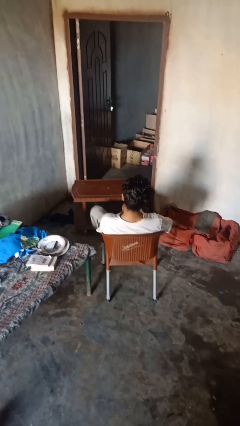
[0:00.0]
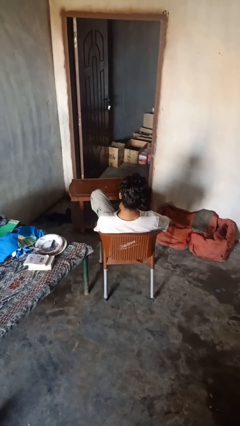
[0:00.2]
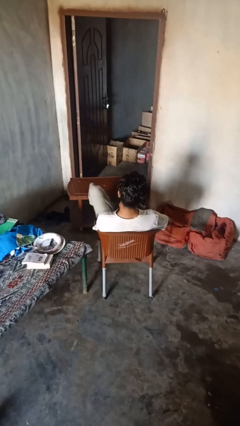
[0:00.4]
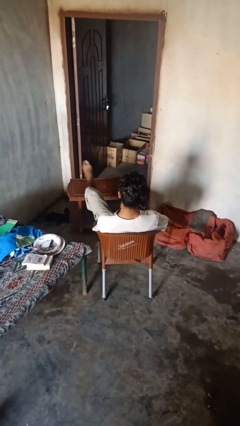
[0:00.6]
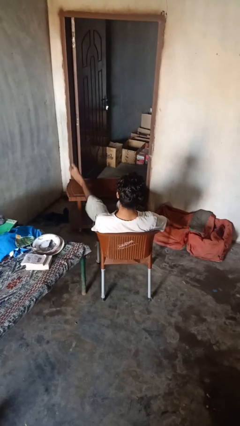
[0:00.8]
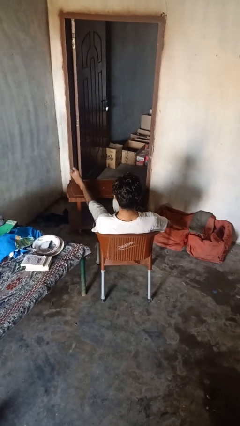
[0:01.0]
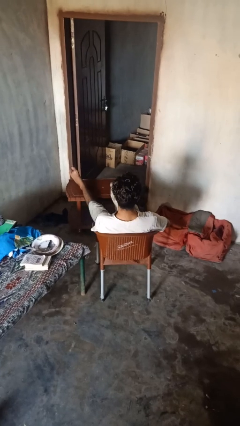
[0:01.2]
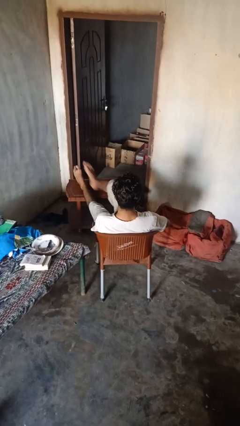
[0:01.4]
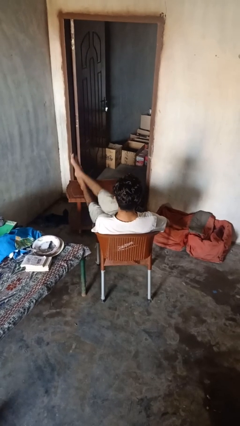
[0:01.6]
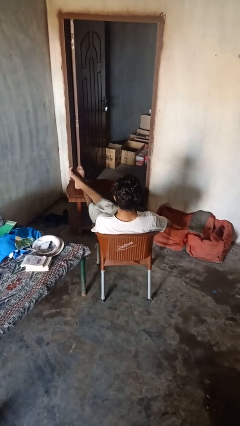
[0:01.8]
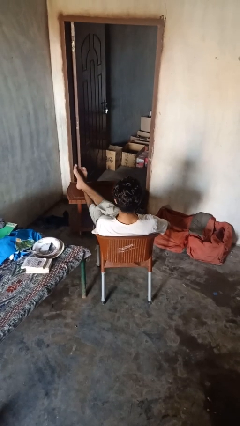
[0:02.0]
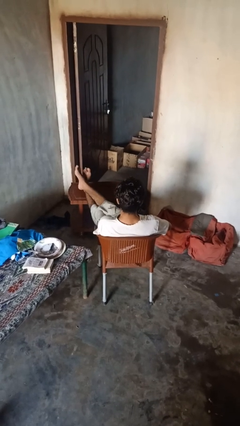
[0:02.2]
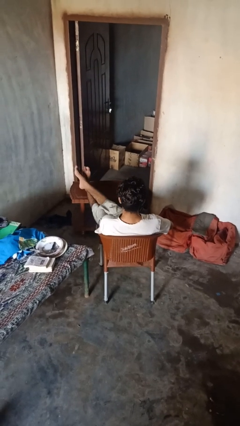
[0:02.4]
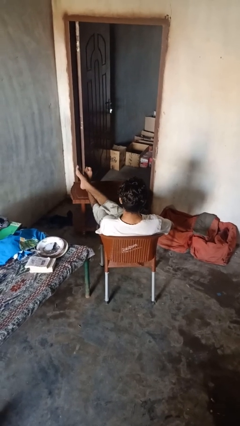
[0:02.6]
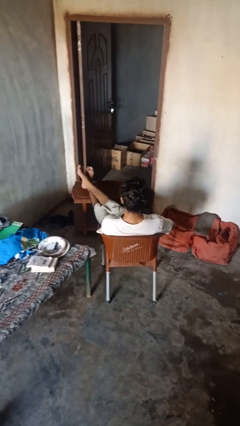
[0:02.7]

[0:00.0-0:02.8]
person puts feet up

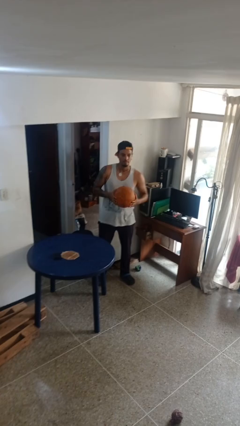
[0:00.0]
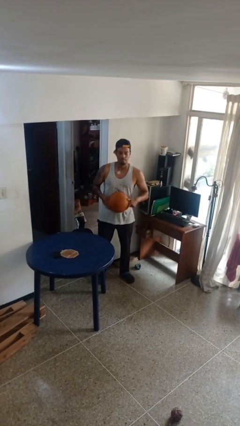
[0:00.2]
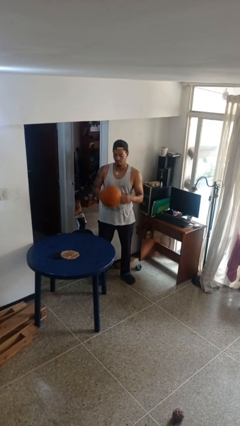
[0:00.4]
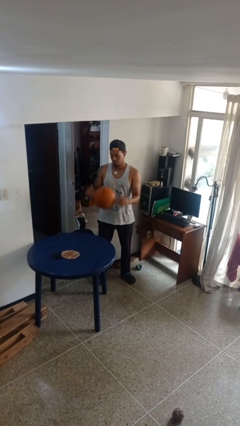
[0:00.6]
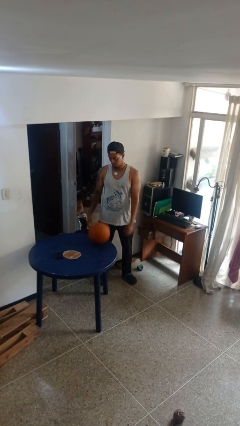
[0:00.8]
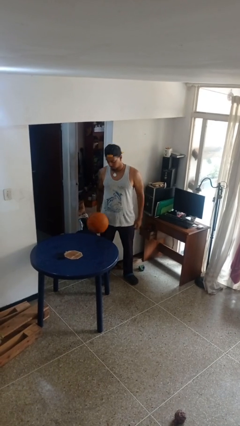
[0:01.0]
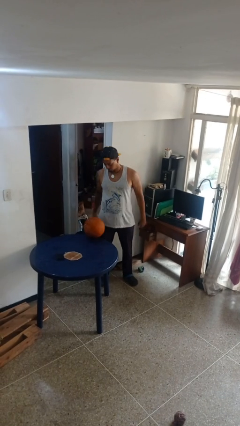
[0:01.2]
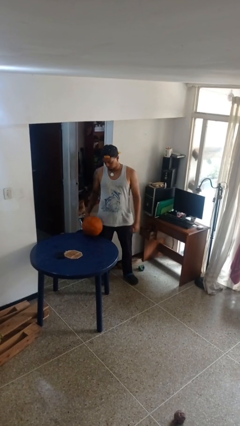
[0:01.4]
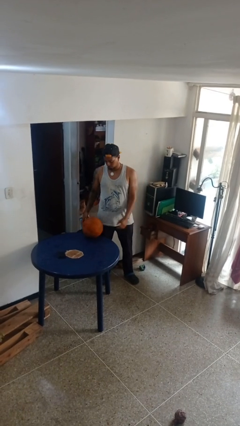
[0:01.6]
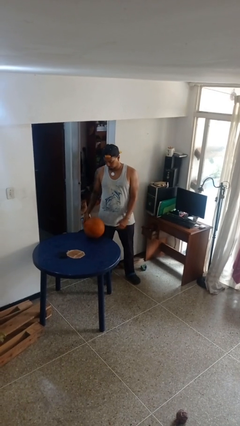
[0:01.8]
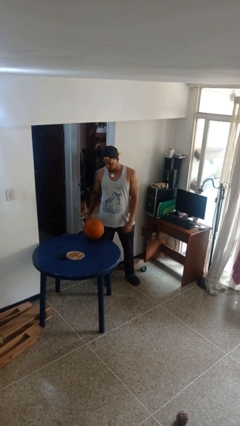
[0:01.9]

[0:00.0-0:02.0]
person throws object on table

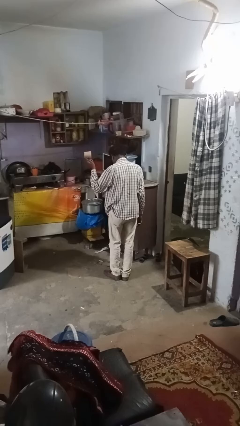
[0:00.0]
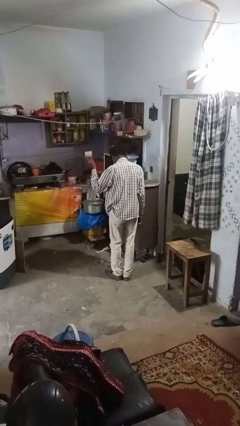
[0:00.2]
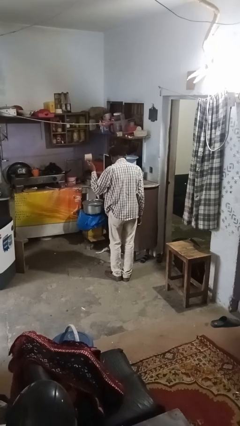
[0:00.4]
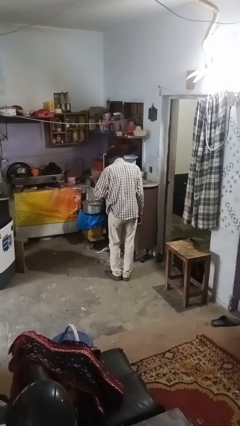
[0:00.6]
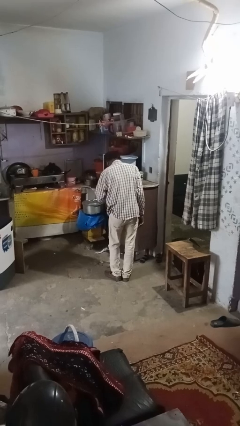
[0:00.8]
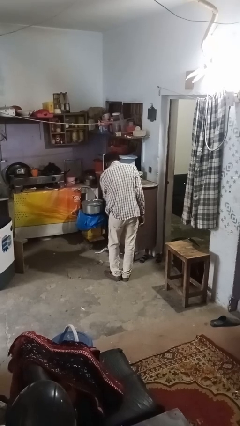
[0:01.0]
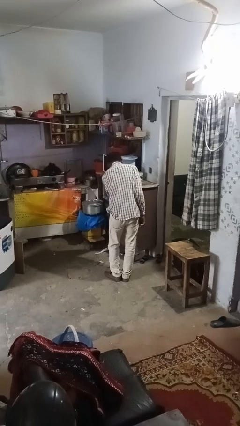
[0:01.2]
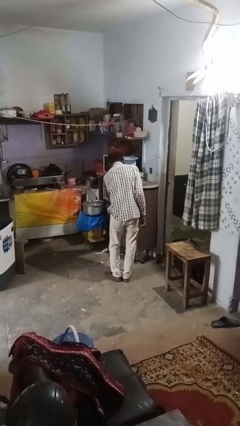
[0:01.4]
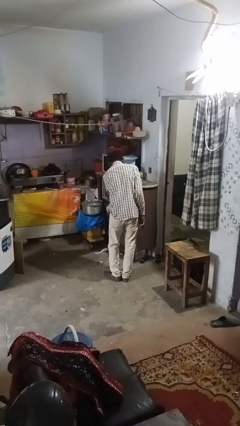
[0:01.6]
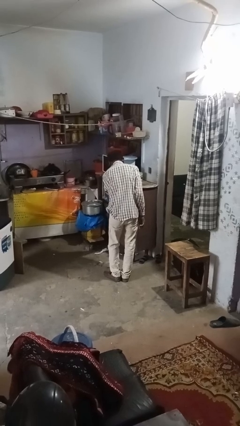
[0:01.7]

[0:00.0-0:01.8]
person puts object into kitchen drawer

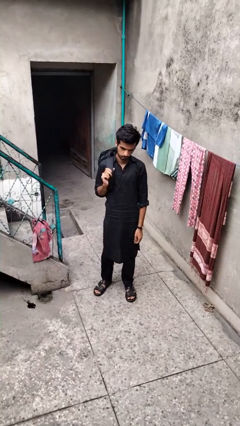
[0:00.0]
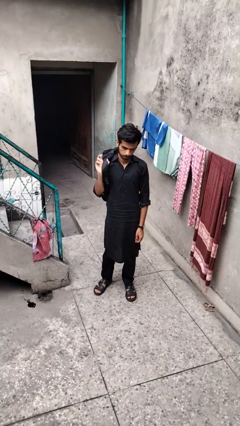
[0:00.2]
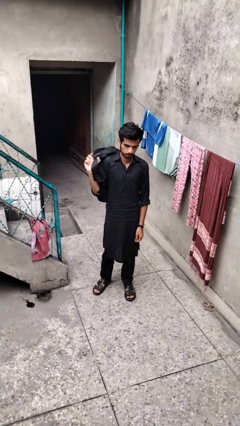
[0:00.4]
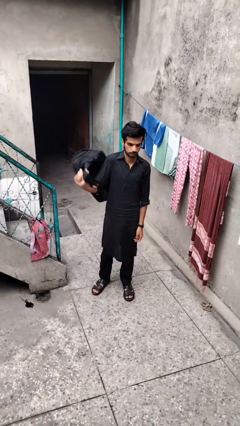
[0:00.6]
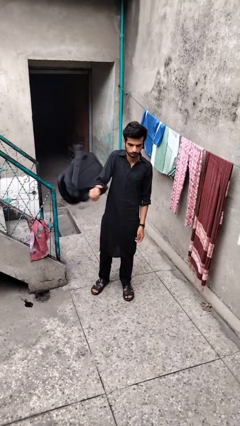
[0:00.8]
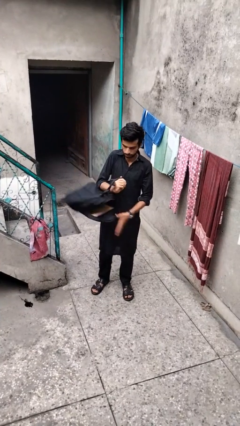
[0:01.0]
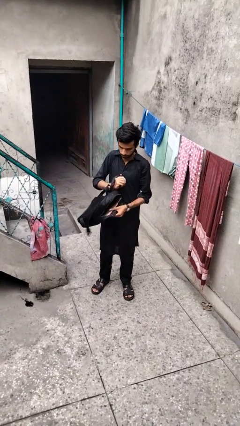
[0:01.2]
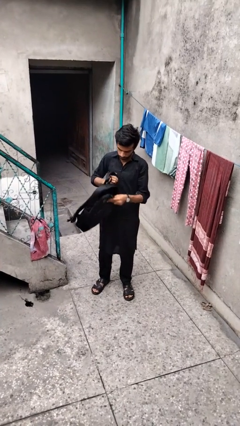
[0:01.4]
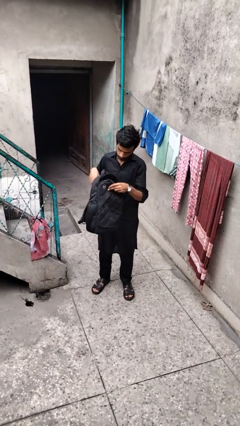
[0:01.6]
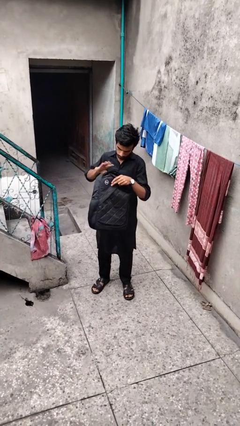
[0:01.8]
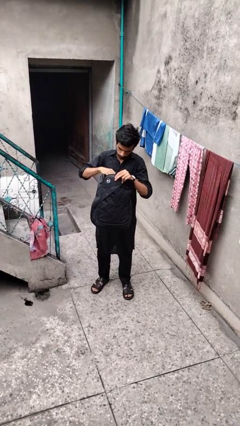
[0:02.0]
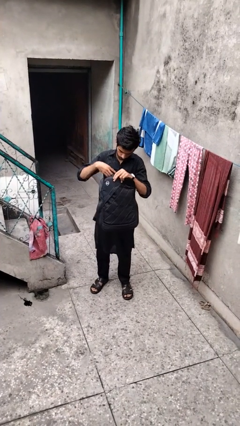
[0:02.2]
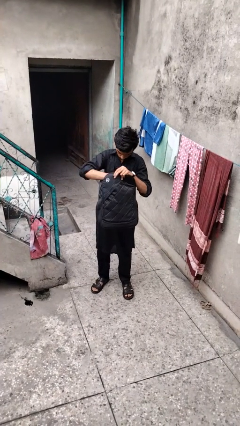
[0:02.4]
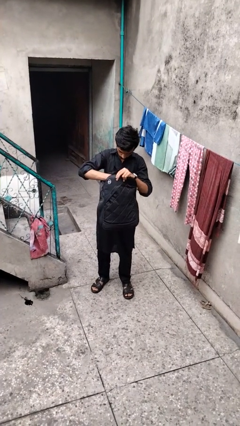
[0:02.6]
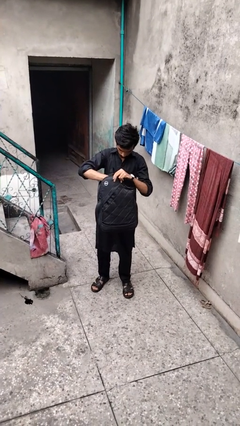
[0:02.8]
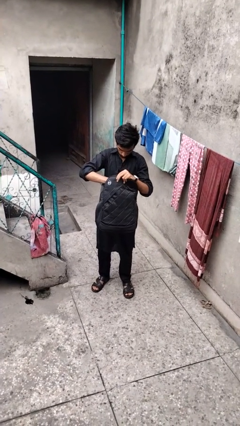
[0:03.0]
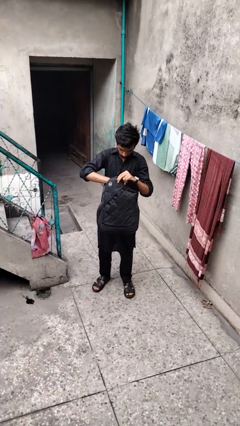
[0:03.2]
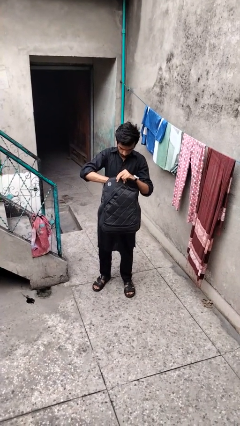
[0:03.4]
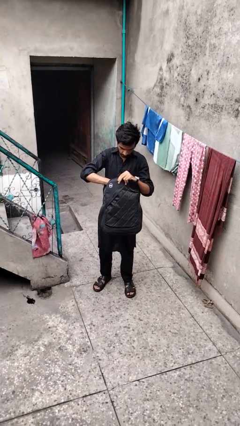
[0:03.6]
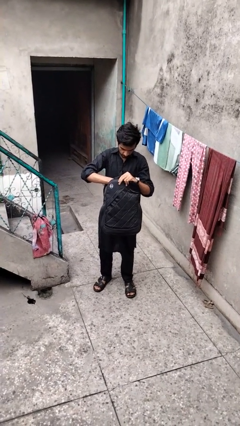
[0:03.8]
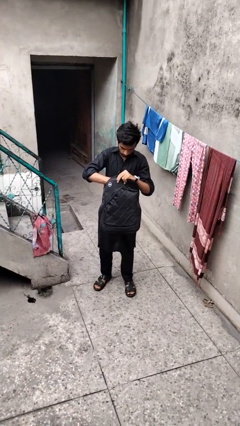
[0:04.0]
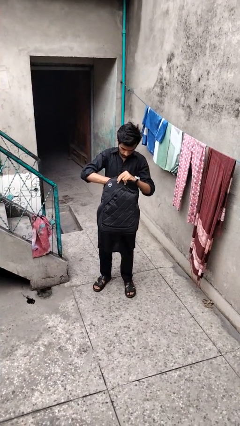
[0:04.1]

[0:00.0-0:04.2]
person searches in backpack

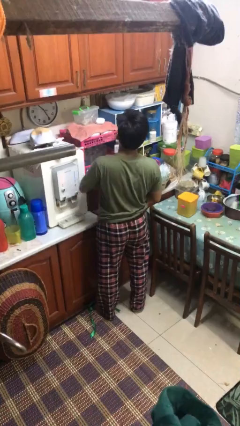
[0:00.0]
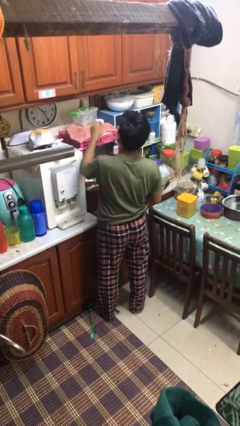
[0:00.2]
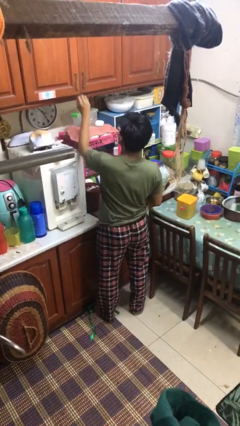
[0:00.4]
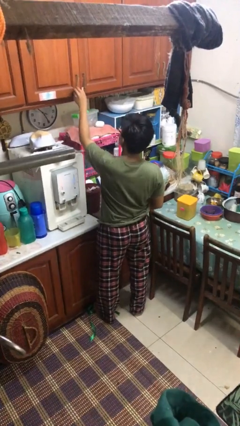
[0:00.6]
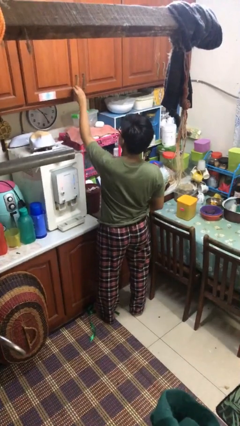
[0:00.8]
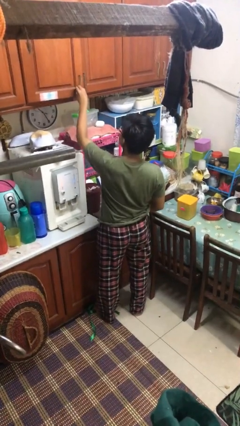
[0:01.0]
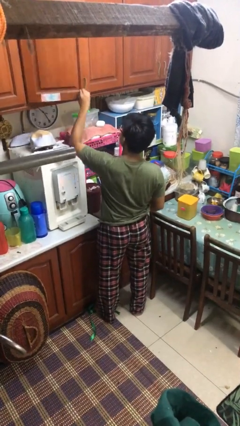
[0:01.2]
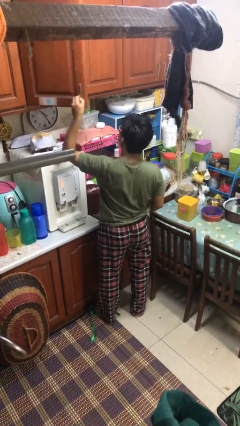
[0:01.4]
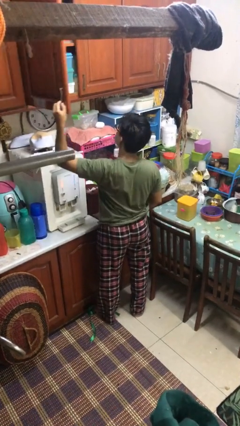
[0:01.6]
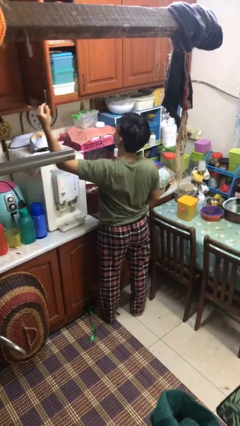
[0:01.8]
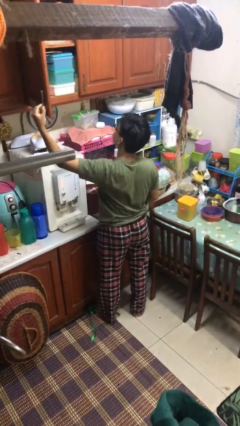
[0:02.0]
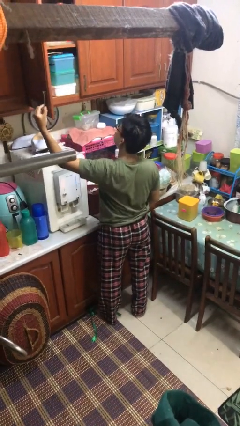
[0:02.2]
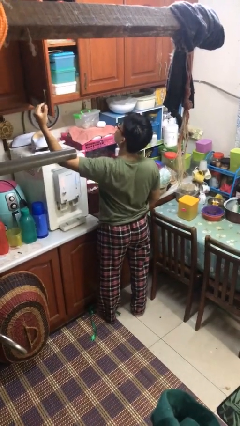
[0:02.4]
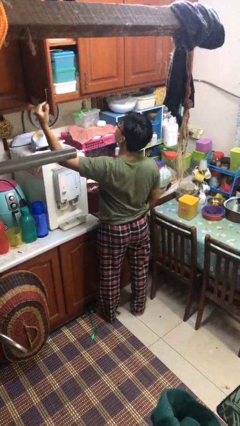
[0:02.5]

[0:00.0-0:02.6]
person opens kitchen drawer

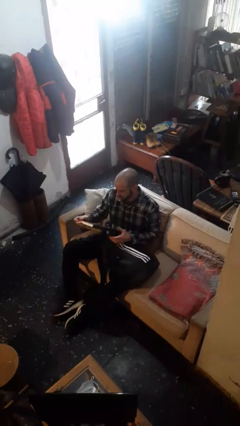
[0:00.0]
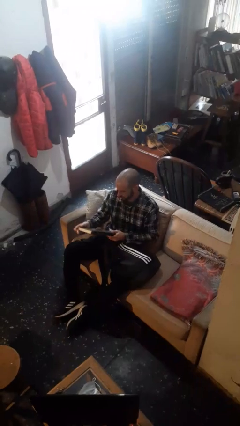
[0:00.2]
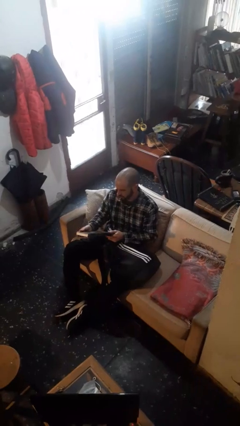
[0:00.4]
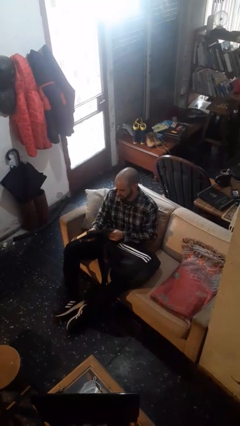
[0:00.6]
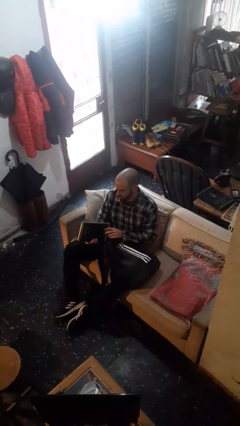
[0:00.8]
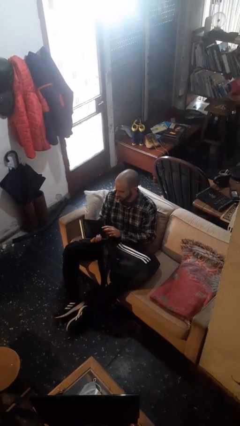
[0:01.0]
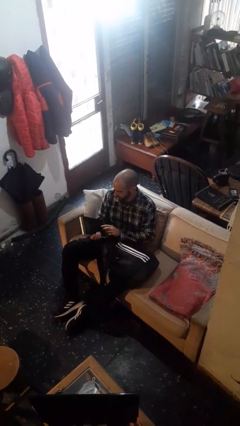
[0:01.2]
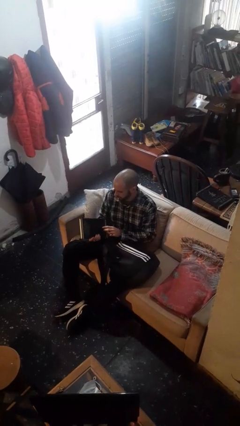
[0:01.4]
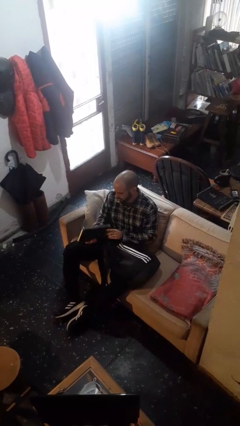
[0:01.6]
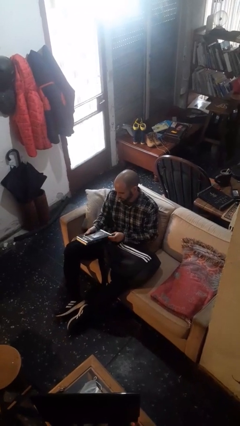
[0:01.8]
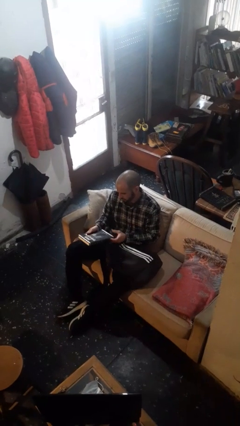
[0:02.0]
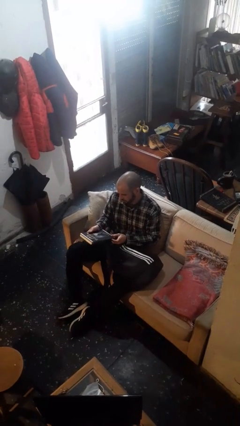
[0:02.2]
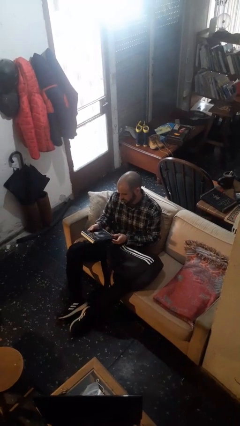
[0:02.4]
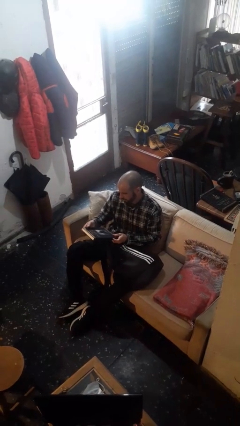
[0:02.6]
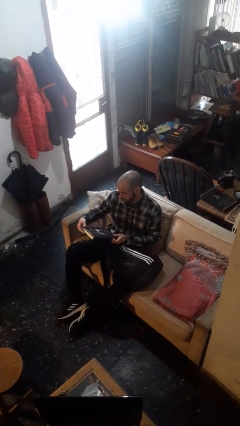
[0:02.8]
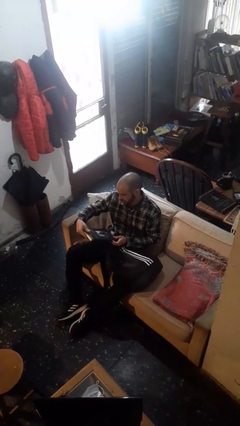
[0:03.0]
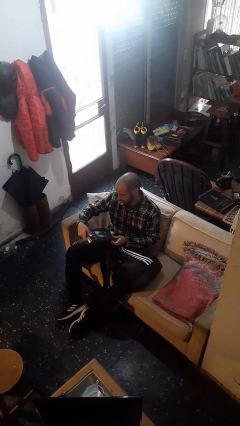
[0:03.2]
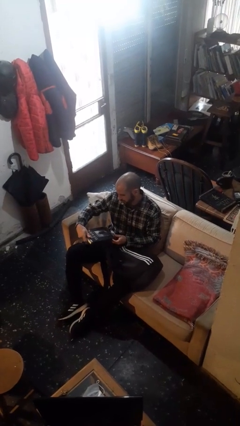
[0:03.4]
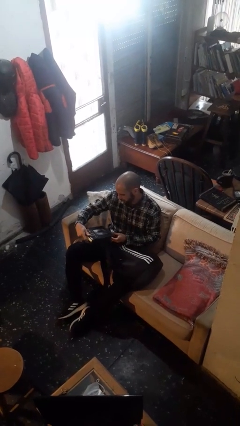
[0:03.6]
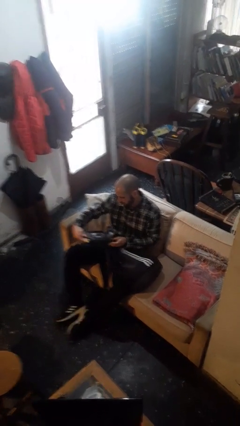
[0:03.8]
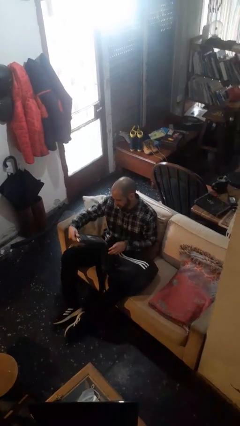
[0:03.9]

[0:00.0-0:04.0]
person takes object from backpack
